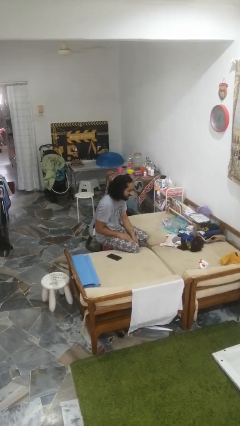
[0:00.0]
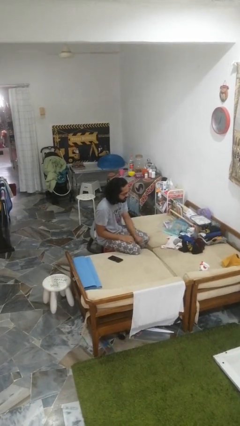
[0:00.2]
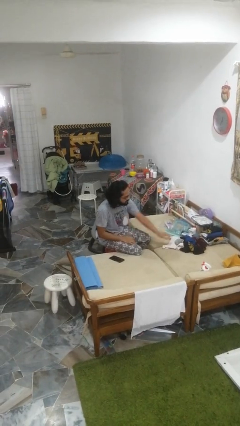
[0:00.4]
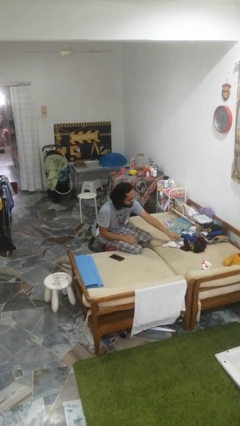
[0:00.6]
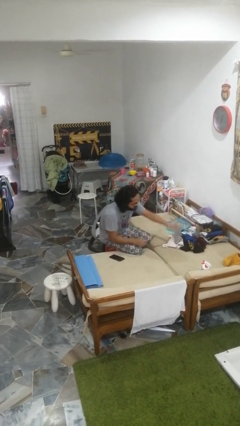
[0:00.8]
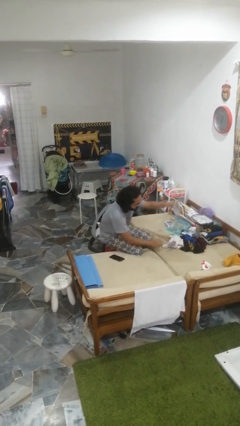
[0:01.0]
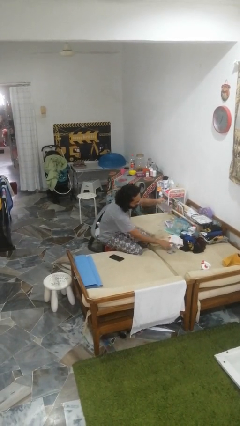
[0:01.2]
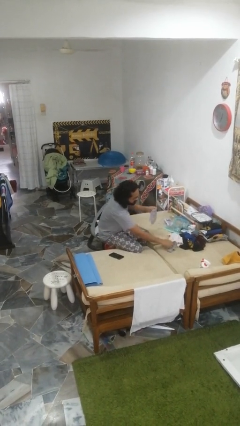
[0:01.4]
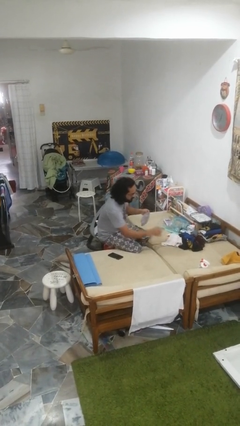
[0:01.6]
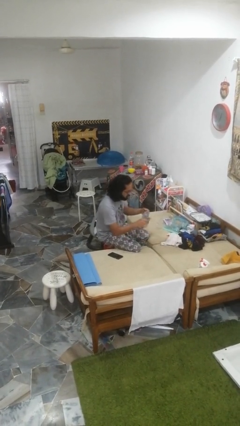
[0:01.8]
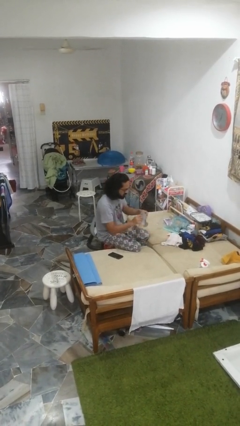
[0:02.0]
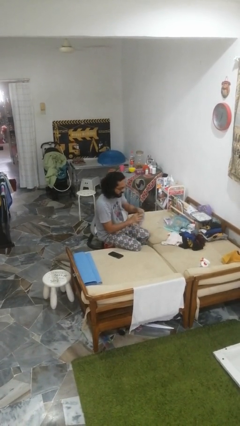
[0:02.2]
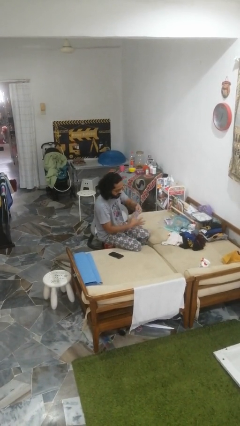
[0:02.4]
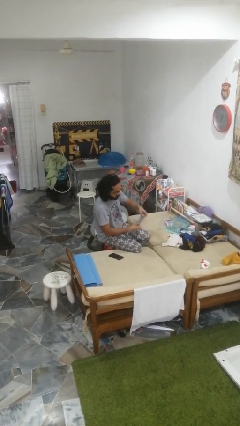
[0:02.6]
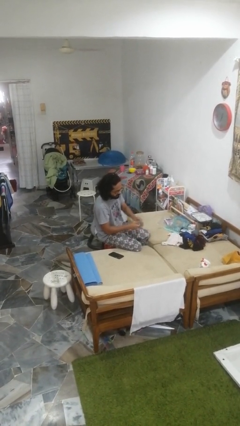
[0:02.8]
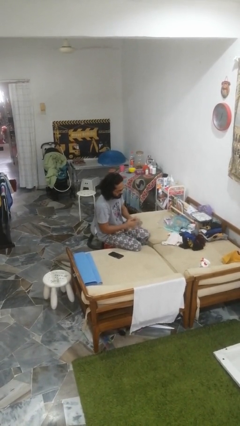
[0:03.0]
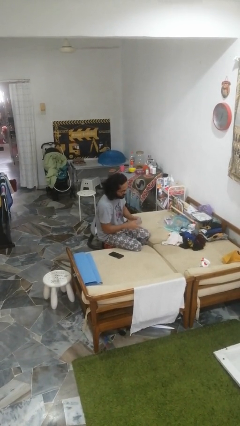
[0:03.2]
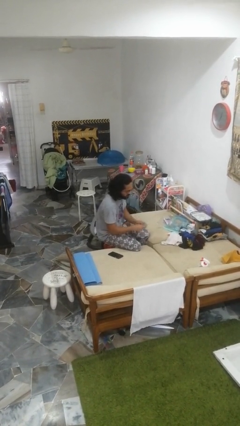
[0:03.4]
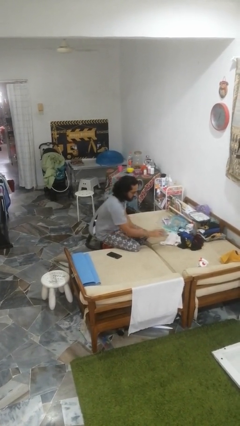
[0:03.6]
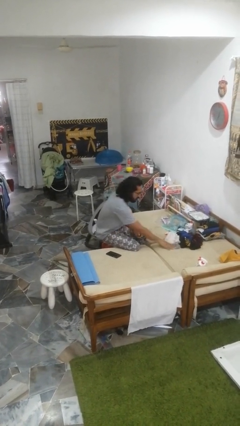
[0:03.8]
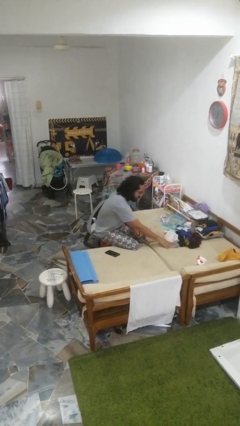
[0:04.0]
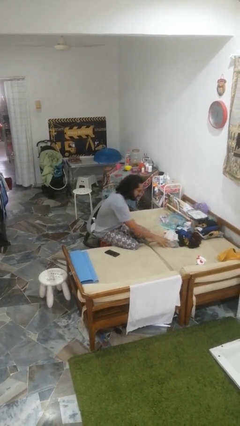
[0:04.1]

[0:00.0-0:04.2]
person folds socks

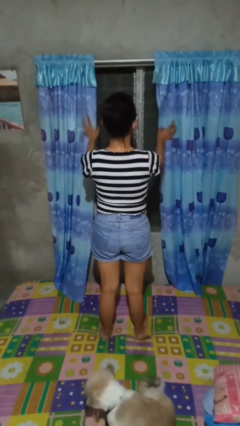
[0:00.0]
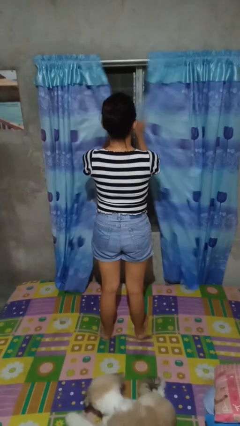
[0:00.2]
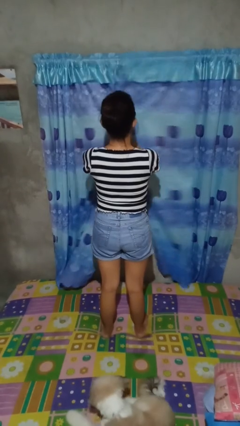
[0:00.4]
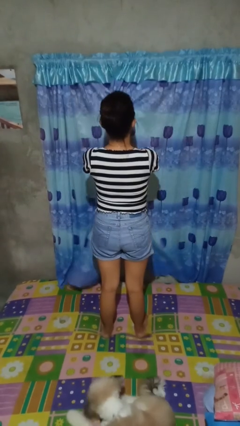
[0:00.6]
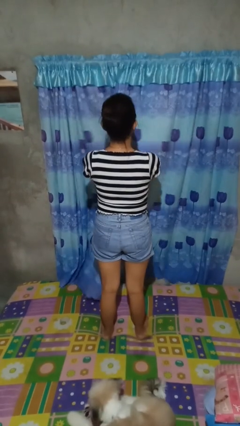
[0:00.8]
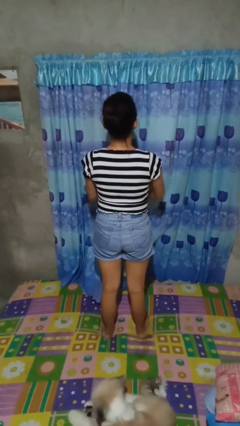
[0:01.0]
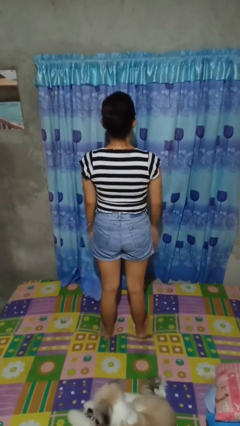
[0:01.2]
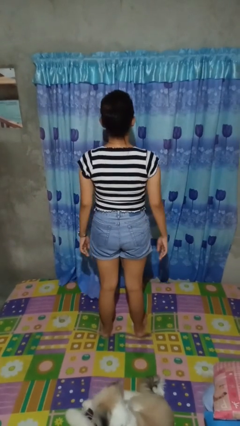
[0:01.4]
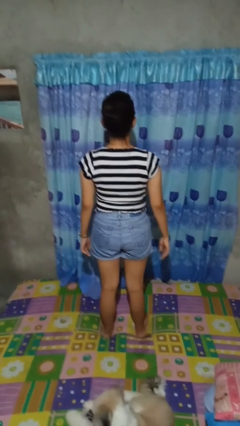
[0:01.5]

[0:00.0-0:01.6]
person closes curtains

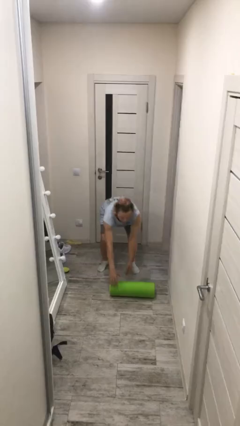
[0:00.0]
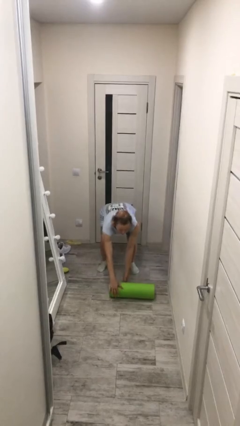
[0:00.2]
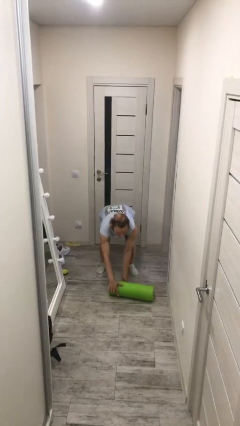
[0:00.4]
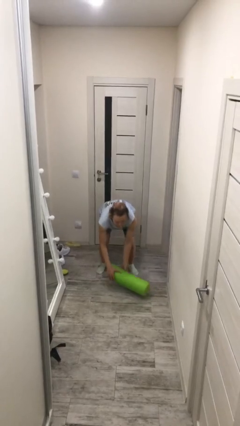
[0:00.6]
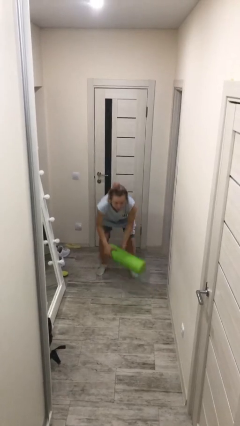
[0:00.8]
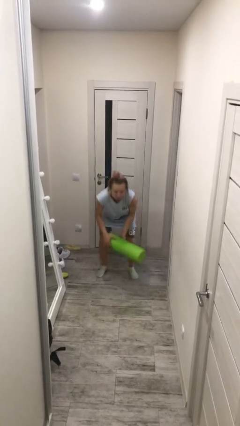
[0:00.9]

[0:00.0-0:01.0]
person picks up object from floor

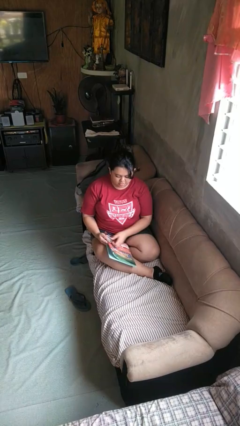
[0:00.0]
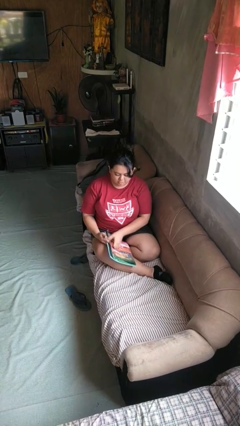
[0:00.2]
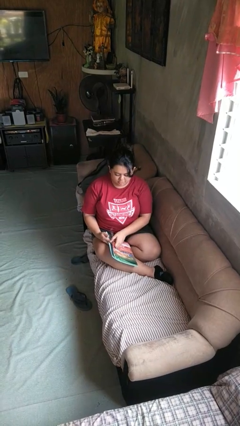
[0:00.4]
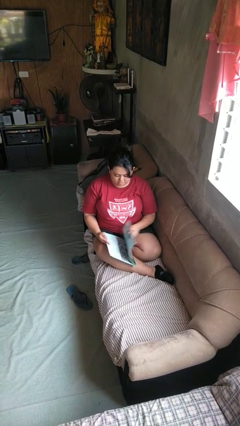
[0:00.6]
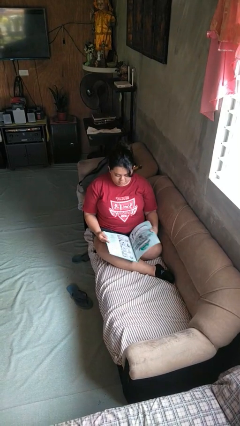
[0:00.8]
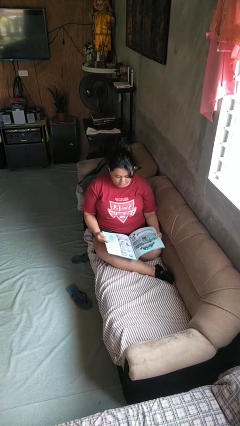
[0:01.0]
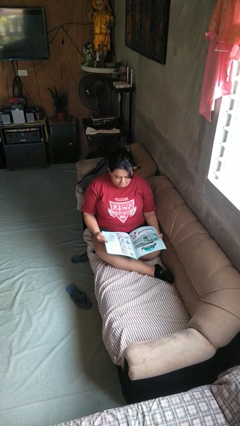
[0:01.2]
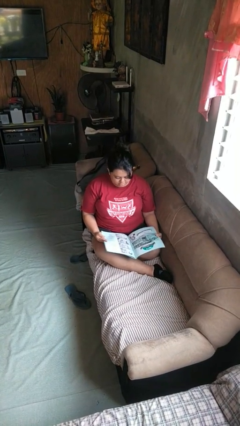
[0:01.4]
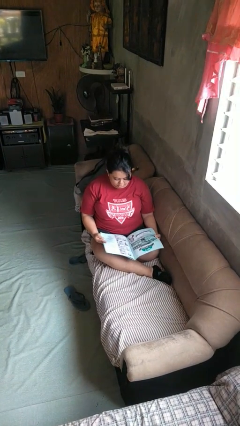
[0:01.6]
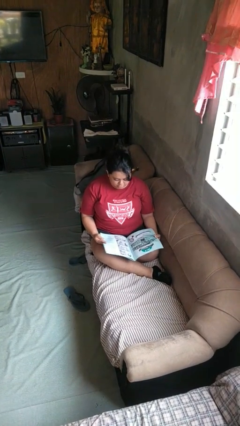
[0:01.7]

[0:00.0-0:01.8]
person reads magazine

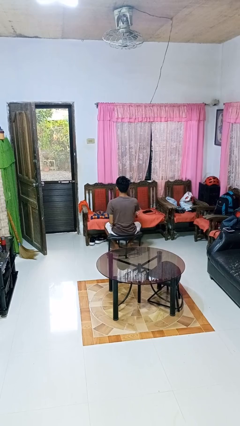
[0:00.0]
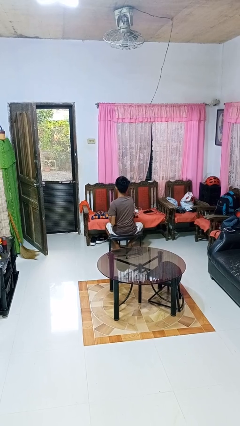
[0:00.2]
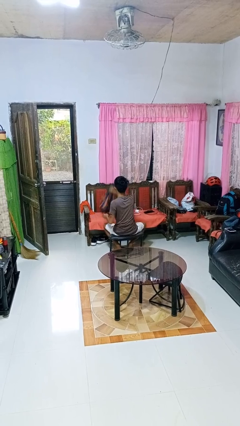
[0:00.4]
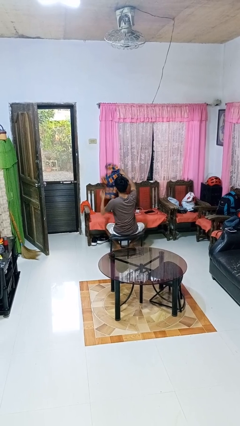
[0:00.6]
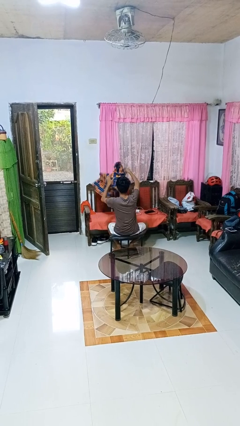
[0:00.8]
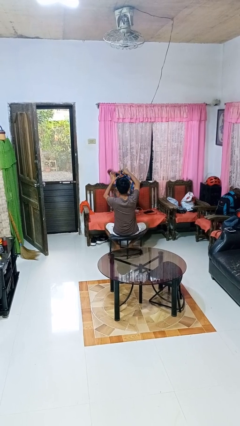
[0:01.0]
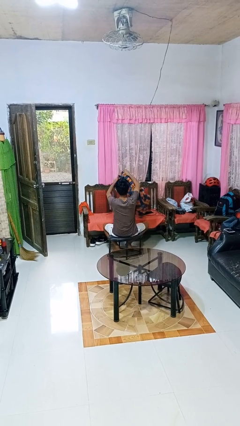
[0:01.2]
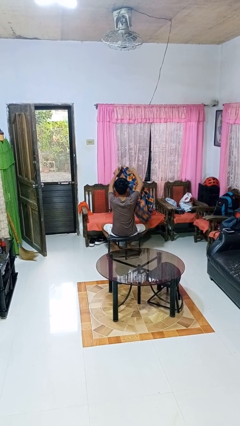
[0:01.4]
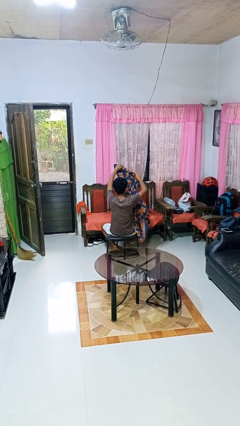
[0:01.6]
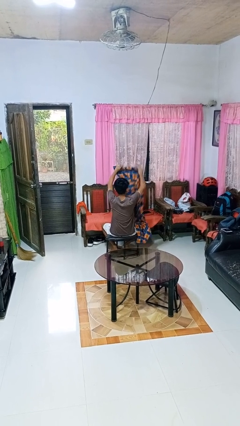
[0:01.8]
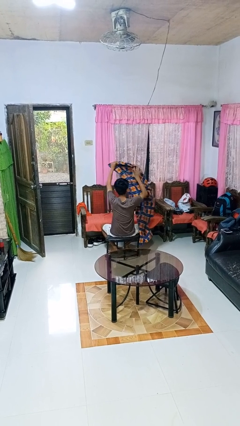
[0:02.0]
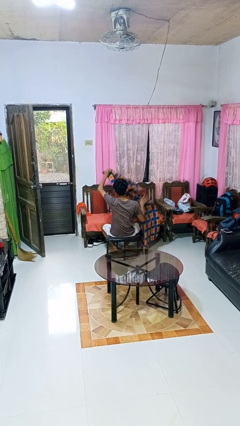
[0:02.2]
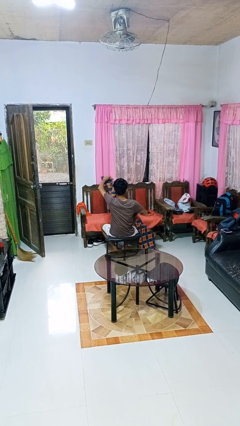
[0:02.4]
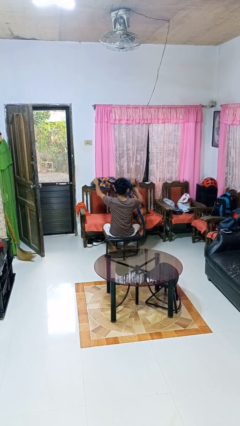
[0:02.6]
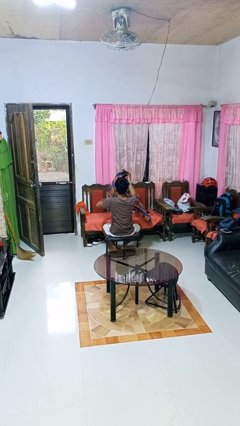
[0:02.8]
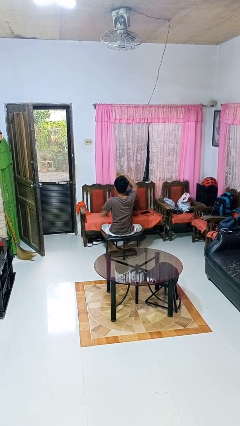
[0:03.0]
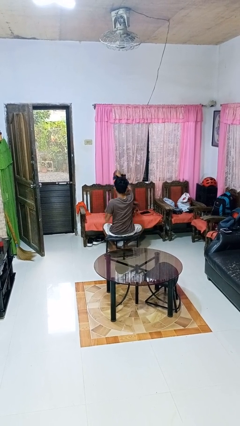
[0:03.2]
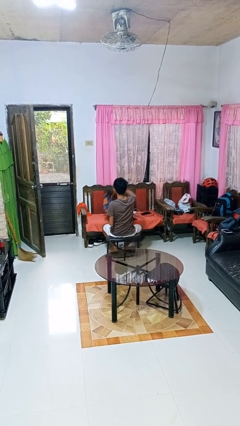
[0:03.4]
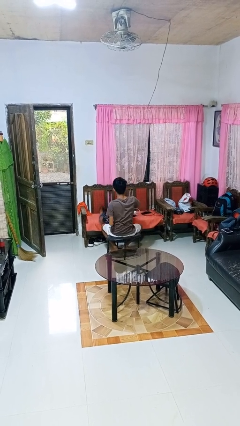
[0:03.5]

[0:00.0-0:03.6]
person unfolds blanket

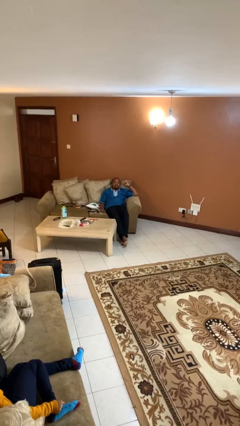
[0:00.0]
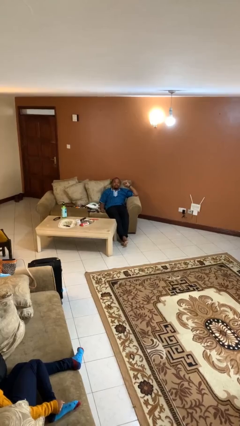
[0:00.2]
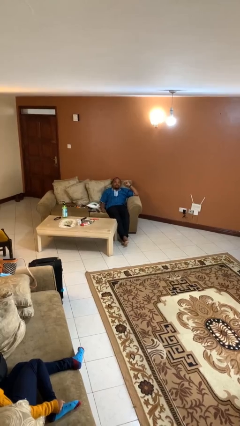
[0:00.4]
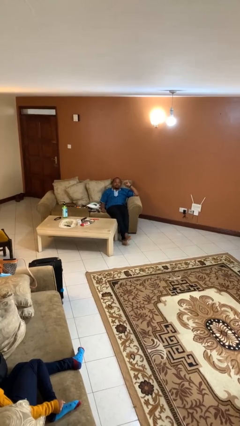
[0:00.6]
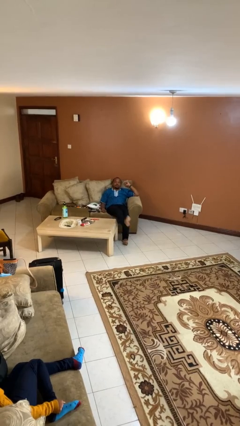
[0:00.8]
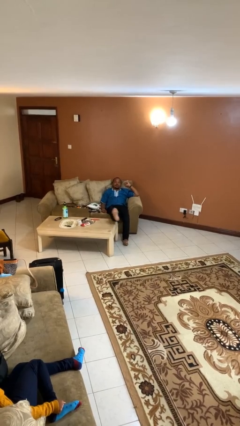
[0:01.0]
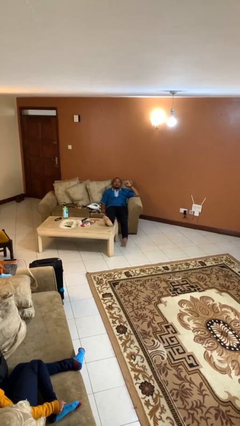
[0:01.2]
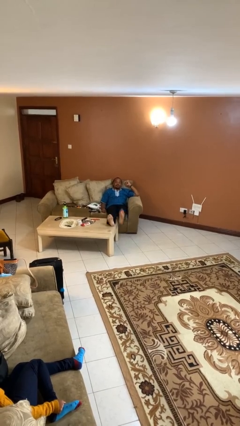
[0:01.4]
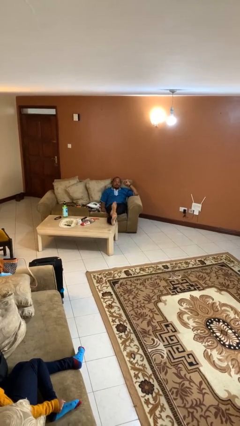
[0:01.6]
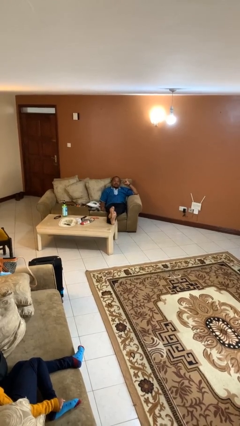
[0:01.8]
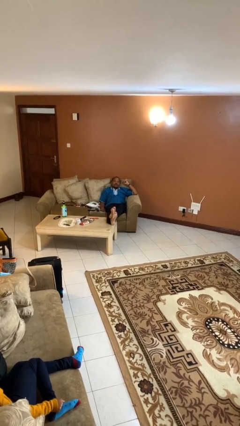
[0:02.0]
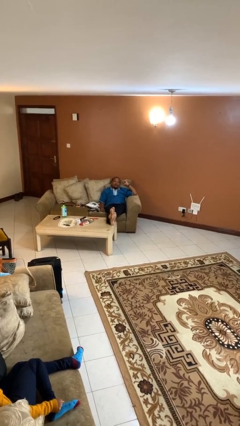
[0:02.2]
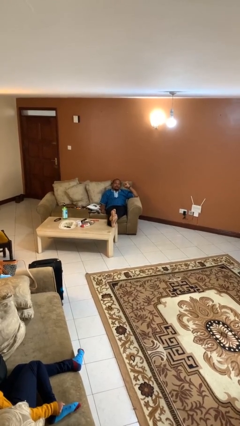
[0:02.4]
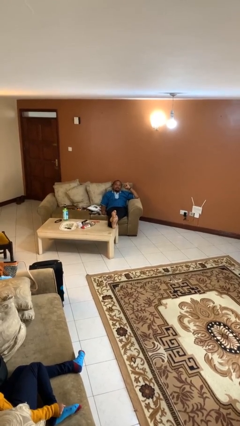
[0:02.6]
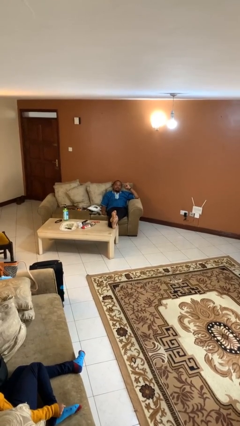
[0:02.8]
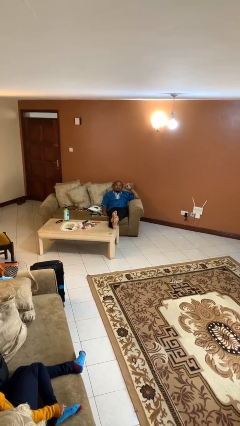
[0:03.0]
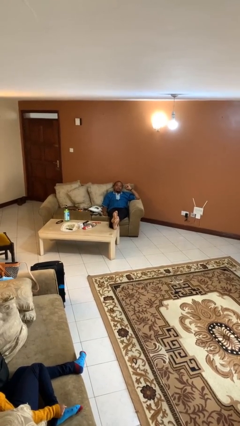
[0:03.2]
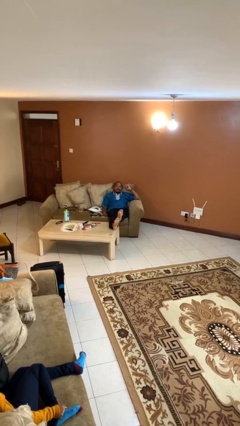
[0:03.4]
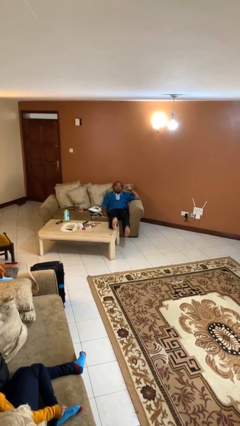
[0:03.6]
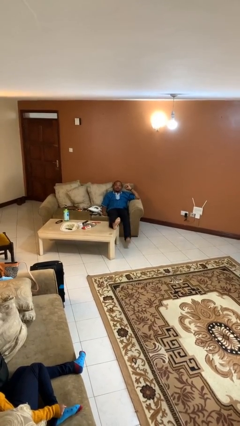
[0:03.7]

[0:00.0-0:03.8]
person puts feet up

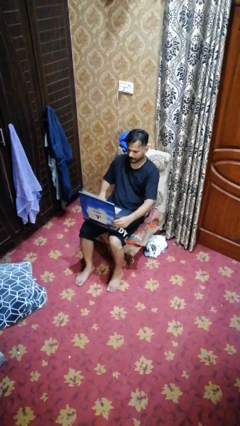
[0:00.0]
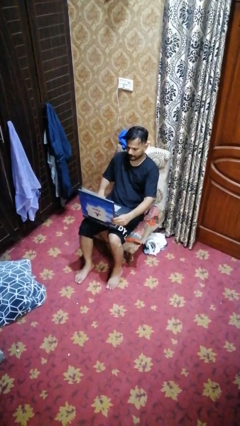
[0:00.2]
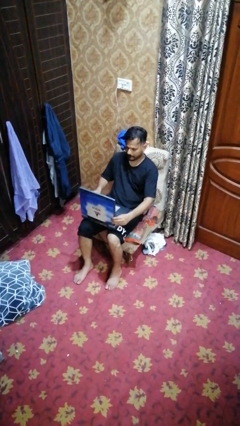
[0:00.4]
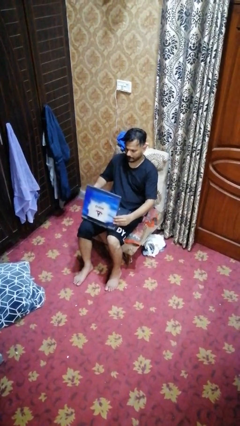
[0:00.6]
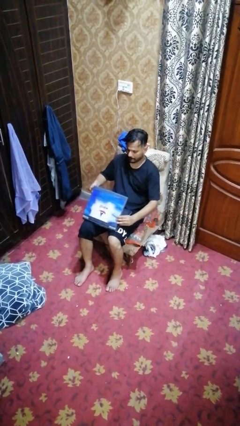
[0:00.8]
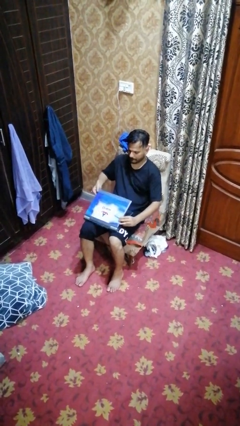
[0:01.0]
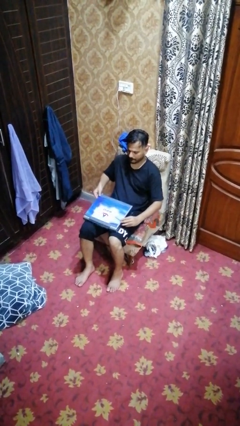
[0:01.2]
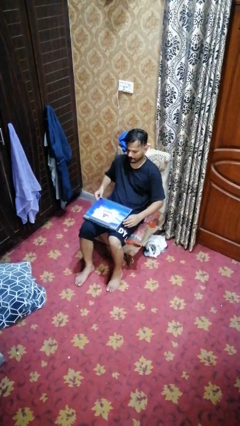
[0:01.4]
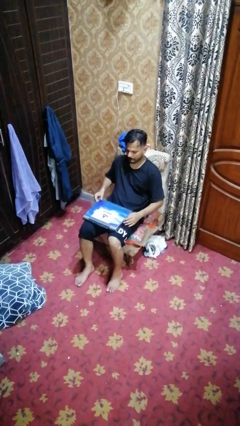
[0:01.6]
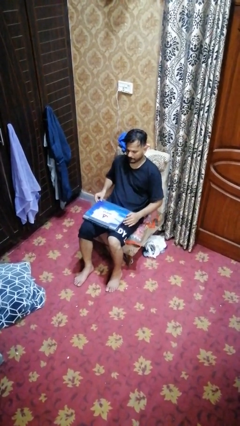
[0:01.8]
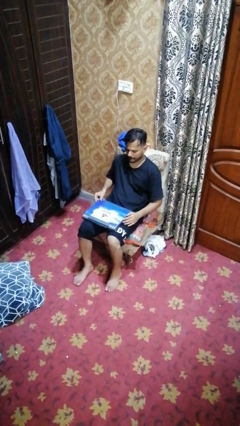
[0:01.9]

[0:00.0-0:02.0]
person closes laptop
